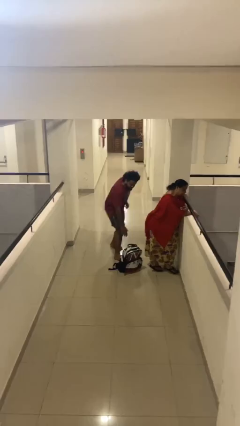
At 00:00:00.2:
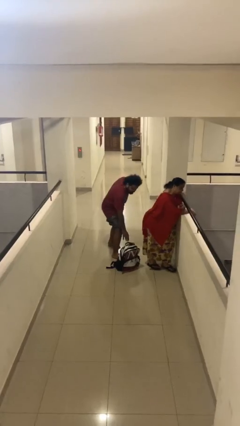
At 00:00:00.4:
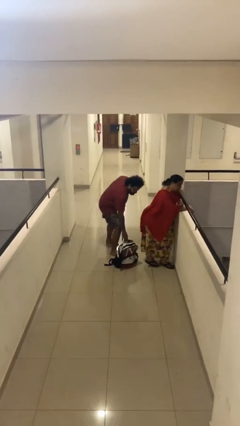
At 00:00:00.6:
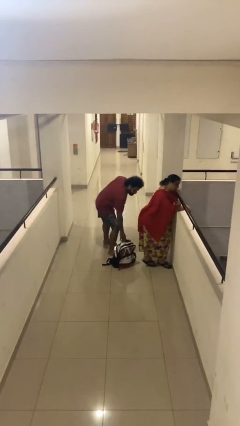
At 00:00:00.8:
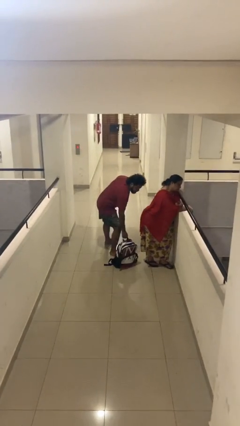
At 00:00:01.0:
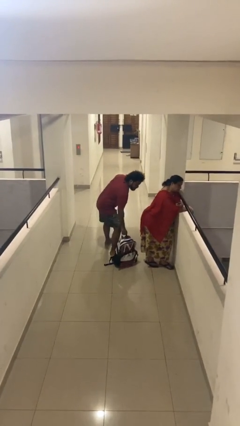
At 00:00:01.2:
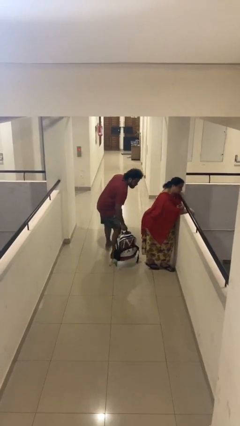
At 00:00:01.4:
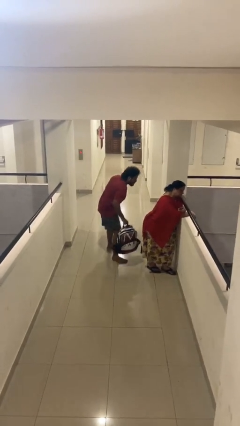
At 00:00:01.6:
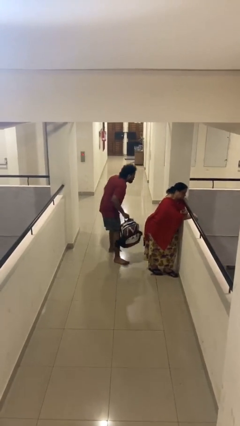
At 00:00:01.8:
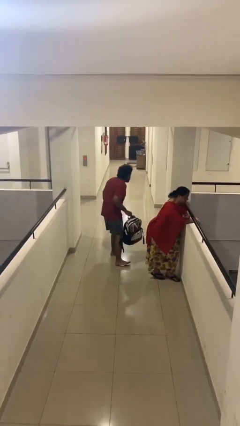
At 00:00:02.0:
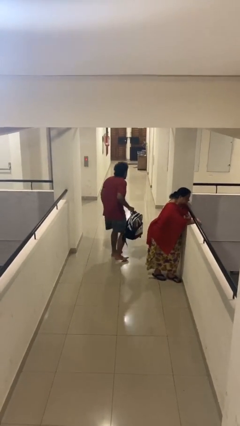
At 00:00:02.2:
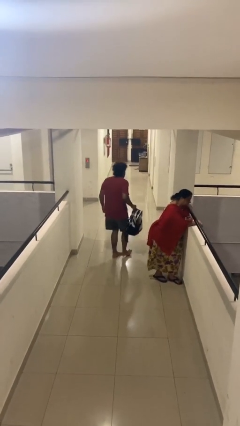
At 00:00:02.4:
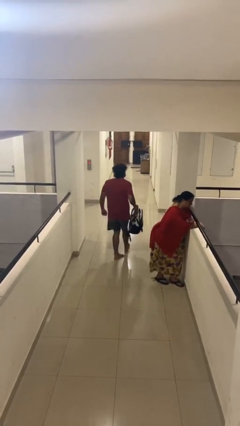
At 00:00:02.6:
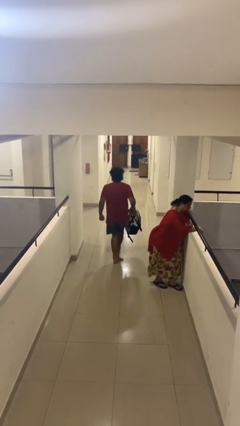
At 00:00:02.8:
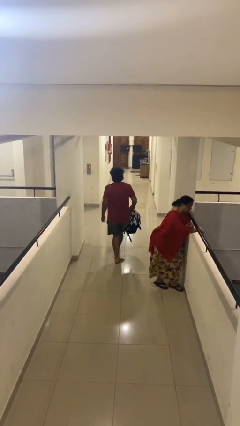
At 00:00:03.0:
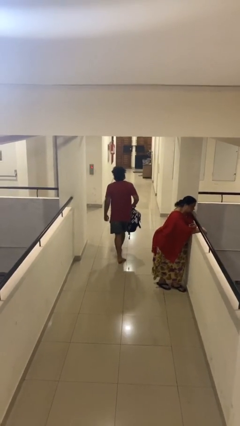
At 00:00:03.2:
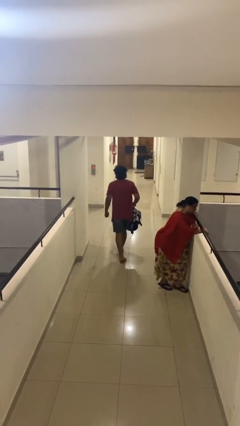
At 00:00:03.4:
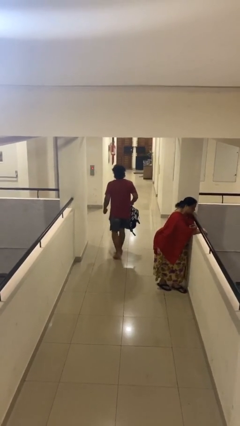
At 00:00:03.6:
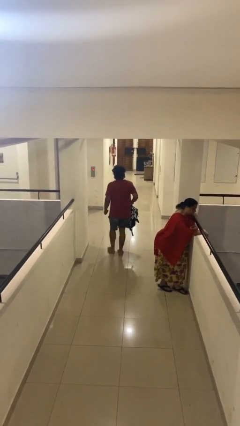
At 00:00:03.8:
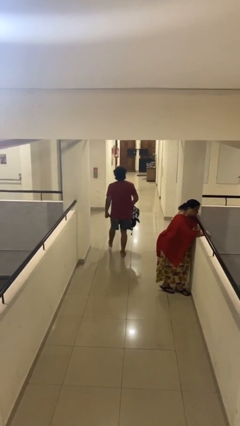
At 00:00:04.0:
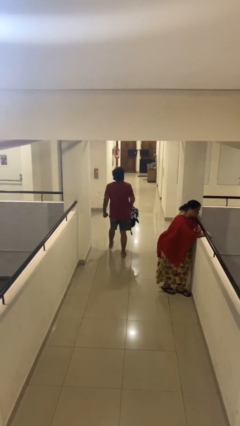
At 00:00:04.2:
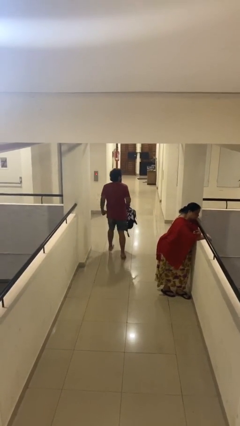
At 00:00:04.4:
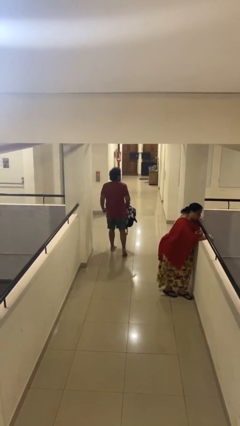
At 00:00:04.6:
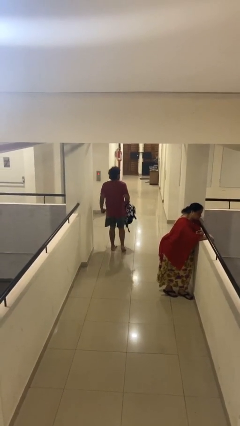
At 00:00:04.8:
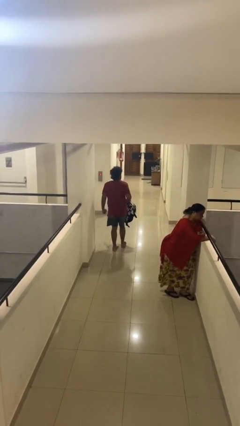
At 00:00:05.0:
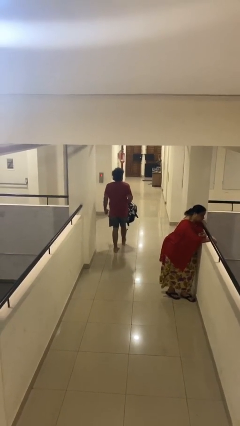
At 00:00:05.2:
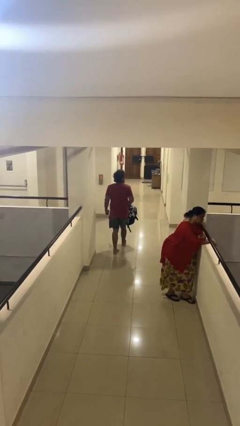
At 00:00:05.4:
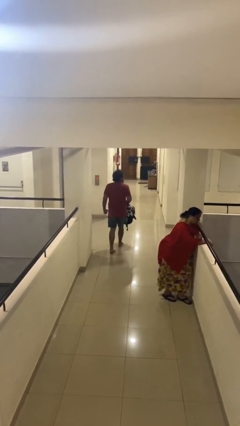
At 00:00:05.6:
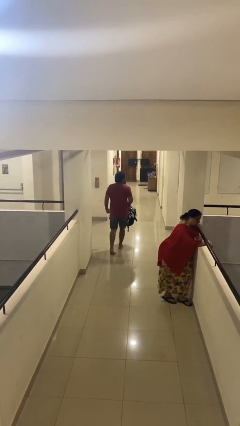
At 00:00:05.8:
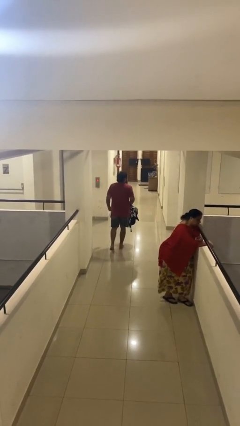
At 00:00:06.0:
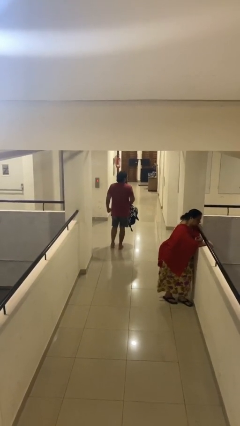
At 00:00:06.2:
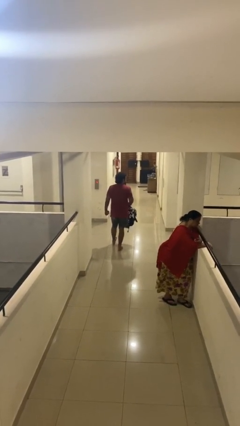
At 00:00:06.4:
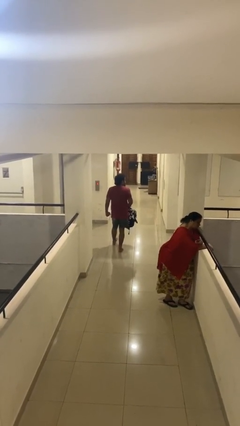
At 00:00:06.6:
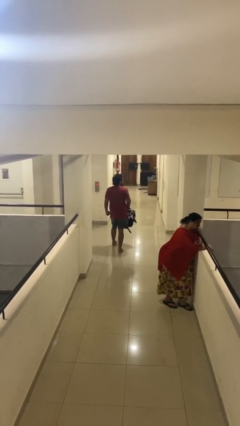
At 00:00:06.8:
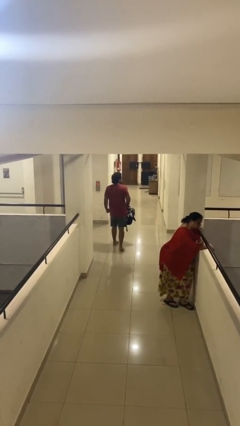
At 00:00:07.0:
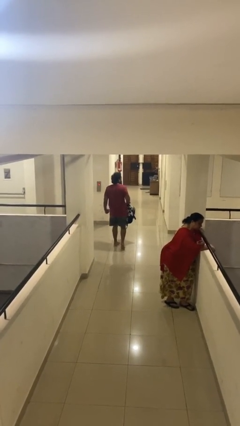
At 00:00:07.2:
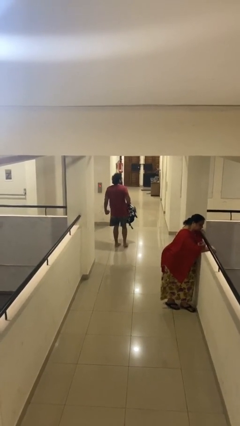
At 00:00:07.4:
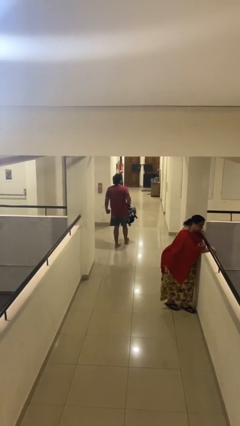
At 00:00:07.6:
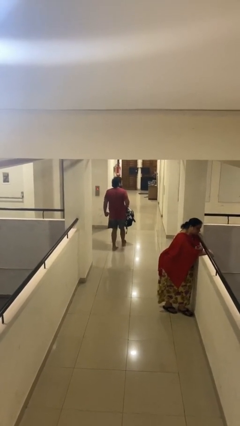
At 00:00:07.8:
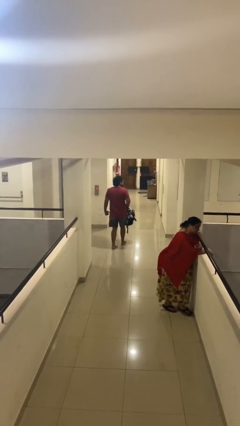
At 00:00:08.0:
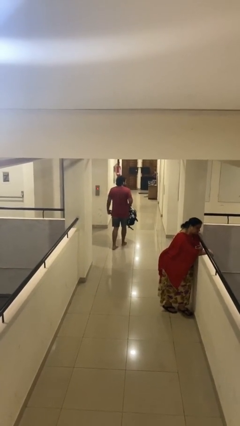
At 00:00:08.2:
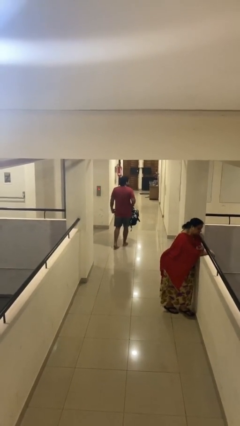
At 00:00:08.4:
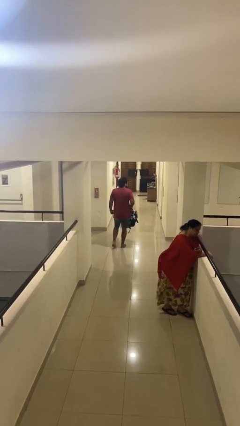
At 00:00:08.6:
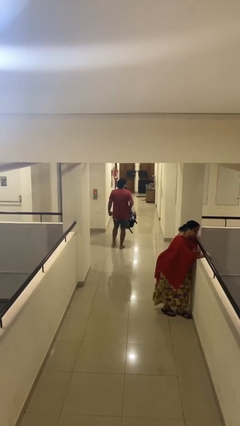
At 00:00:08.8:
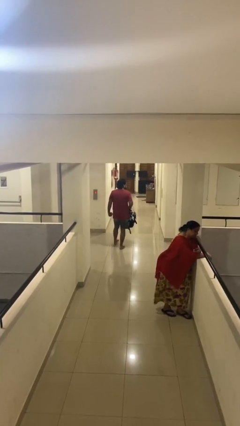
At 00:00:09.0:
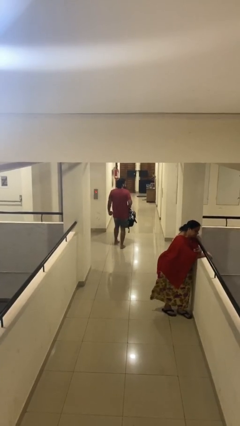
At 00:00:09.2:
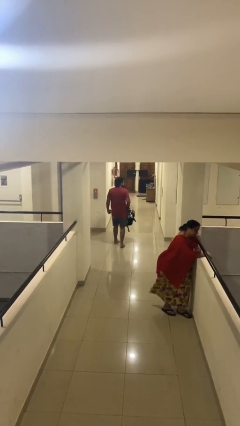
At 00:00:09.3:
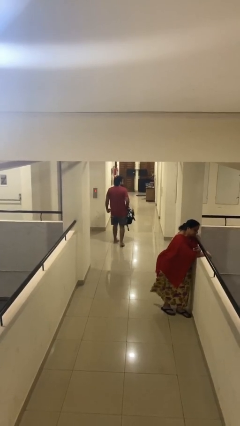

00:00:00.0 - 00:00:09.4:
person steals object from person

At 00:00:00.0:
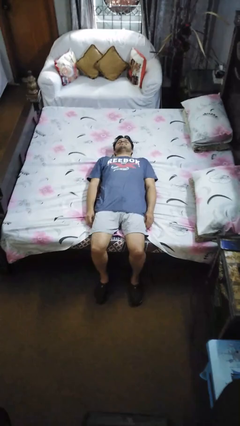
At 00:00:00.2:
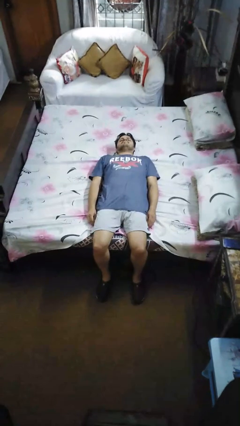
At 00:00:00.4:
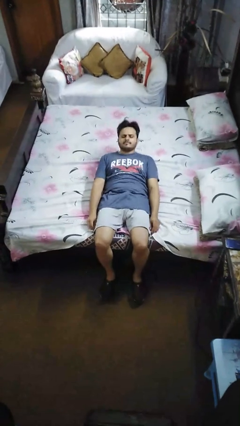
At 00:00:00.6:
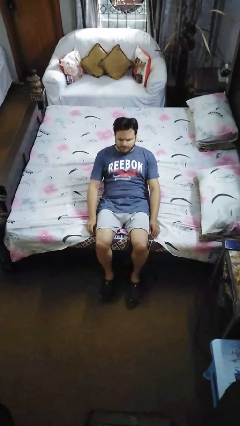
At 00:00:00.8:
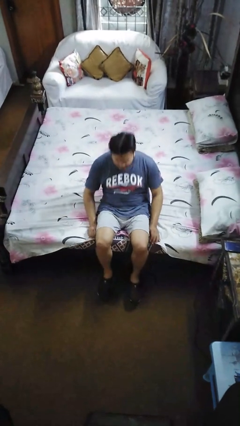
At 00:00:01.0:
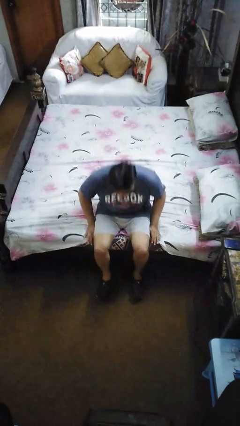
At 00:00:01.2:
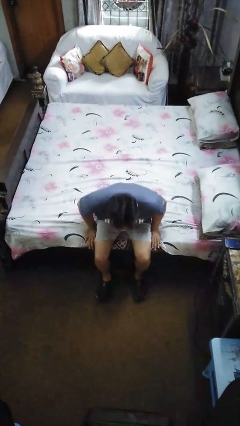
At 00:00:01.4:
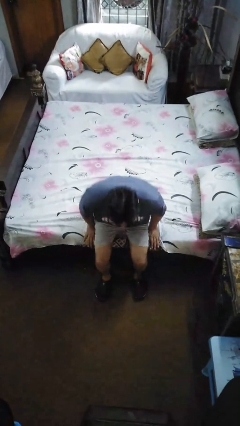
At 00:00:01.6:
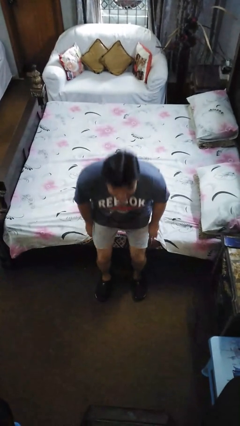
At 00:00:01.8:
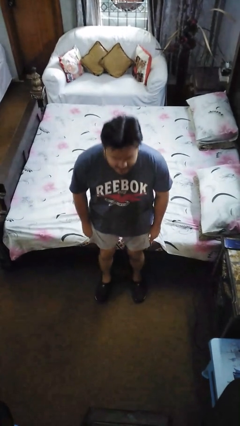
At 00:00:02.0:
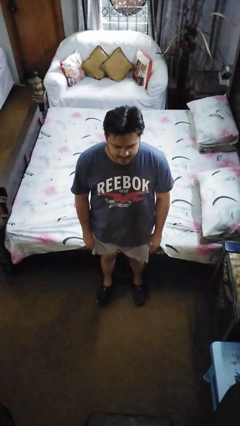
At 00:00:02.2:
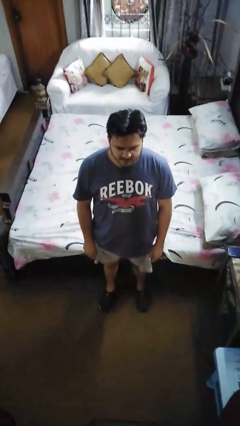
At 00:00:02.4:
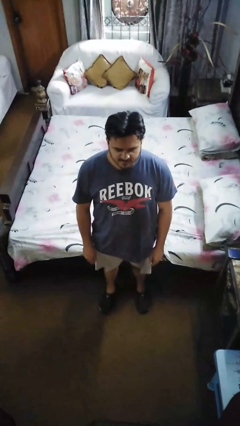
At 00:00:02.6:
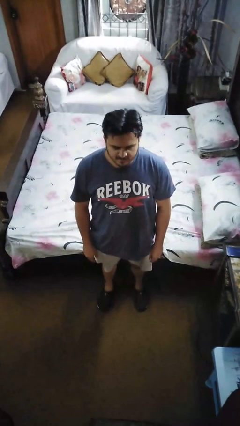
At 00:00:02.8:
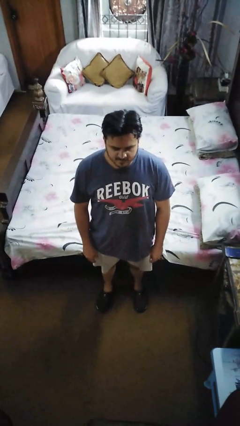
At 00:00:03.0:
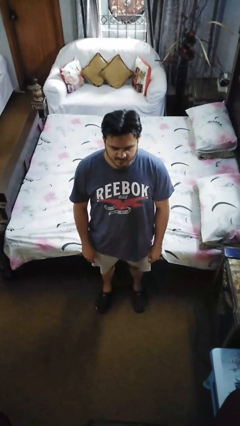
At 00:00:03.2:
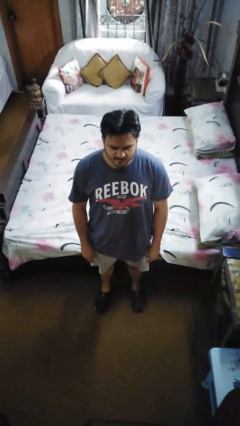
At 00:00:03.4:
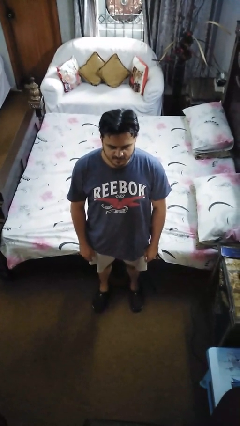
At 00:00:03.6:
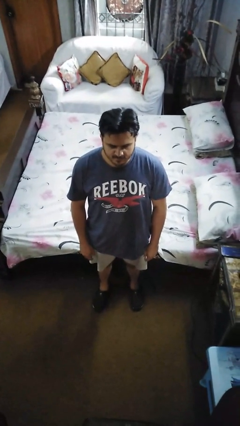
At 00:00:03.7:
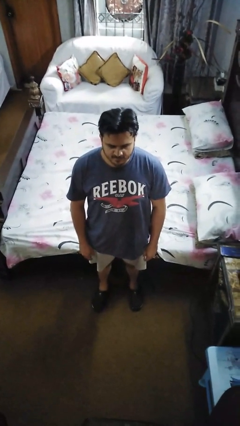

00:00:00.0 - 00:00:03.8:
person stands up

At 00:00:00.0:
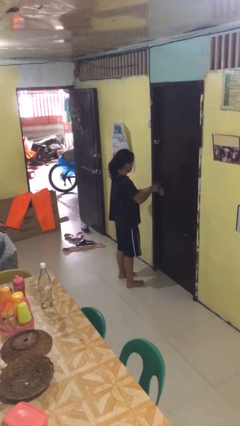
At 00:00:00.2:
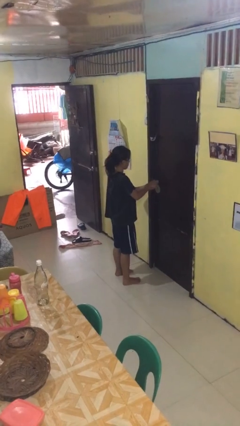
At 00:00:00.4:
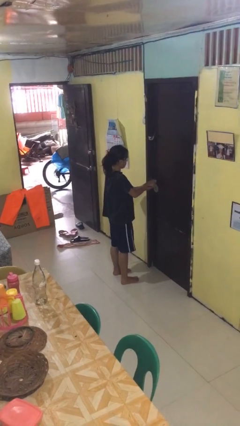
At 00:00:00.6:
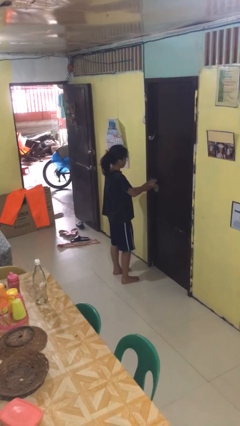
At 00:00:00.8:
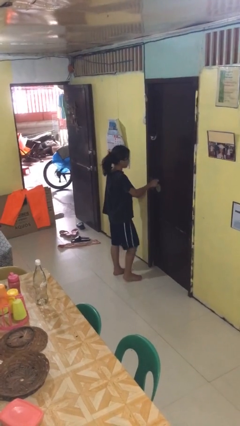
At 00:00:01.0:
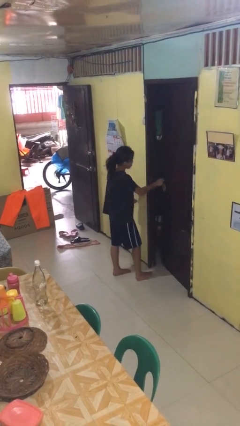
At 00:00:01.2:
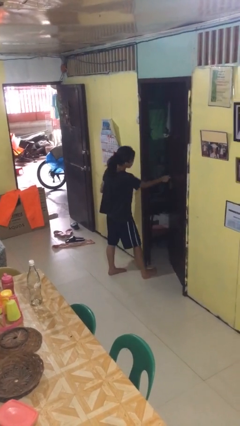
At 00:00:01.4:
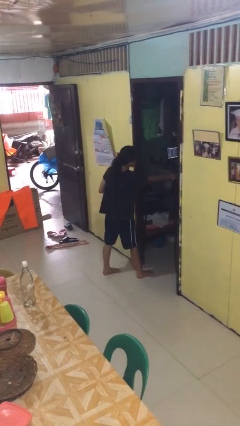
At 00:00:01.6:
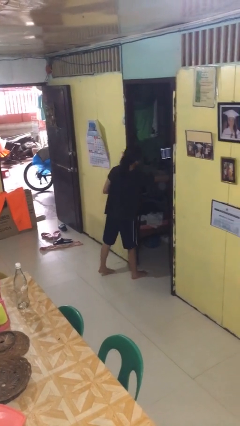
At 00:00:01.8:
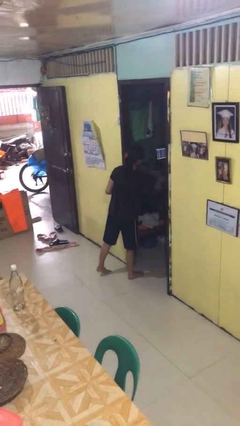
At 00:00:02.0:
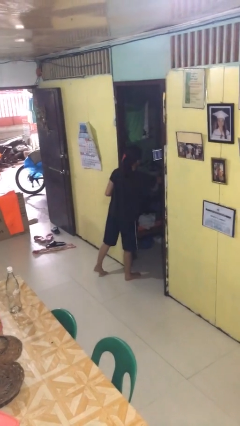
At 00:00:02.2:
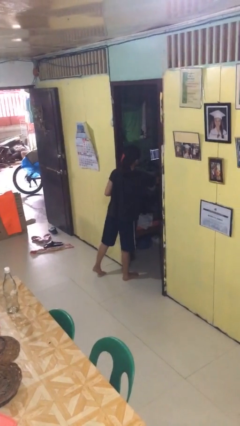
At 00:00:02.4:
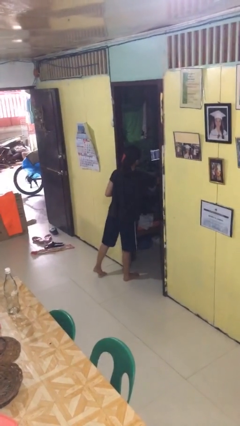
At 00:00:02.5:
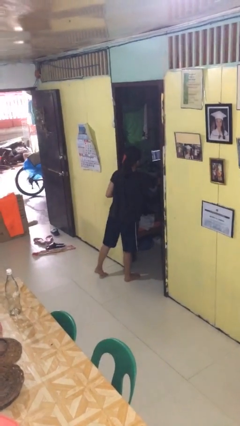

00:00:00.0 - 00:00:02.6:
person opens facility door

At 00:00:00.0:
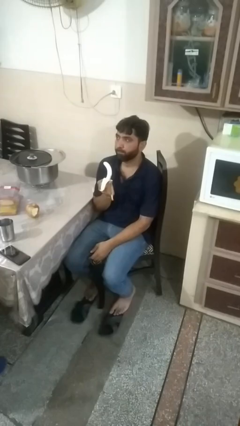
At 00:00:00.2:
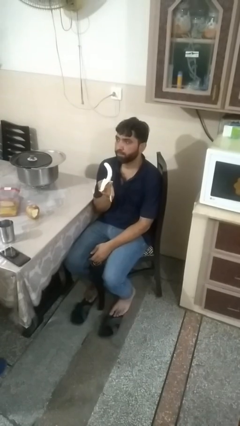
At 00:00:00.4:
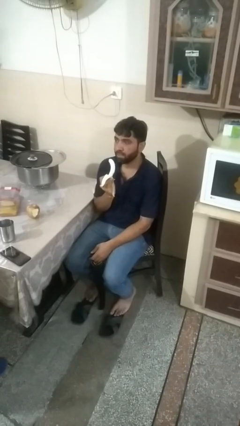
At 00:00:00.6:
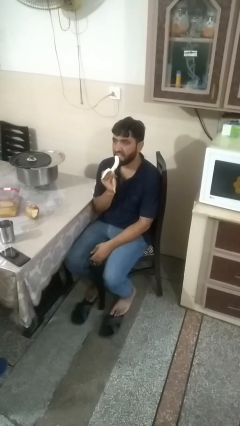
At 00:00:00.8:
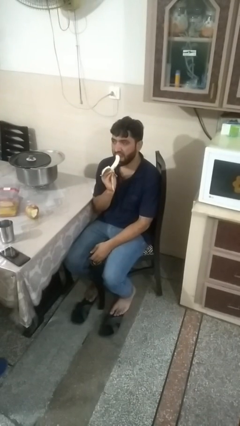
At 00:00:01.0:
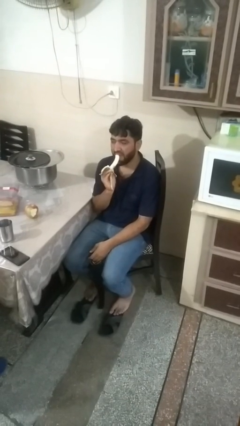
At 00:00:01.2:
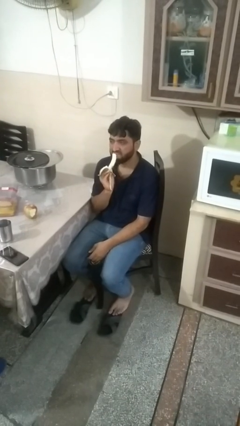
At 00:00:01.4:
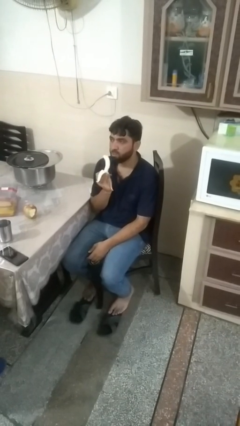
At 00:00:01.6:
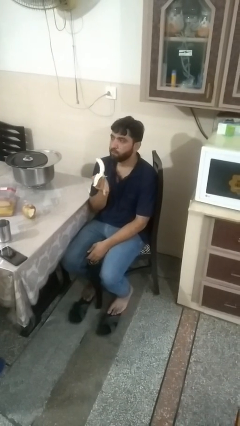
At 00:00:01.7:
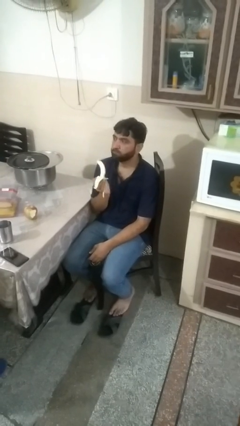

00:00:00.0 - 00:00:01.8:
person eats banana
